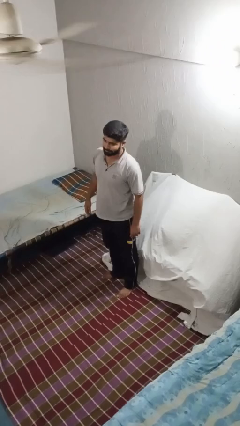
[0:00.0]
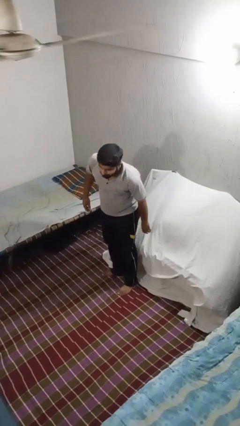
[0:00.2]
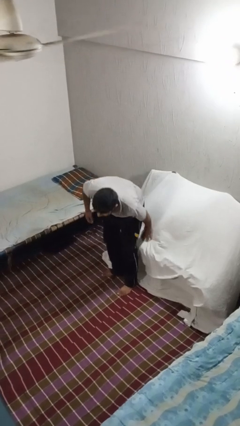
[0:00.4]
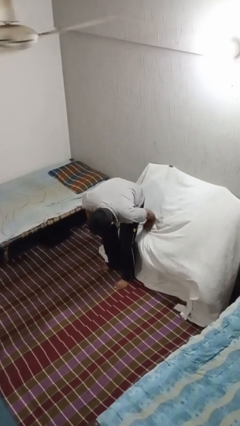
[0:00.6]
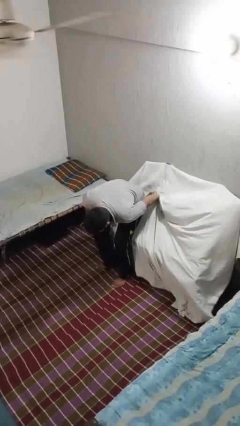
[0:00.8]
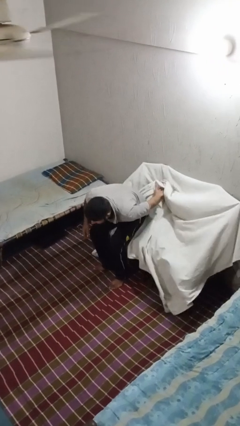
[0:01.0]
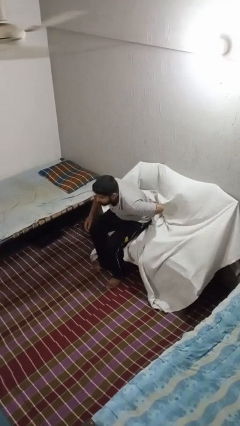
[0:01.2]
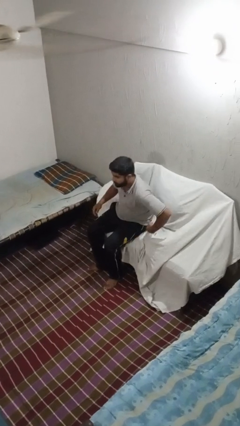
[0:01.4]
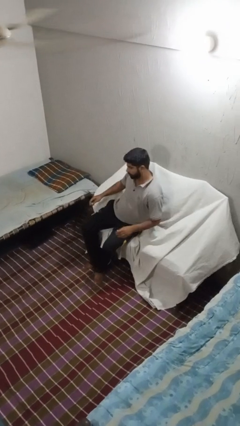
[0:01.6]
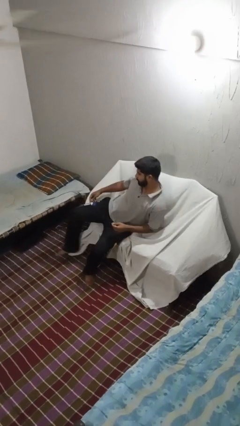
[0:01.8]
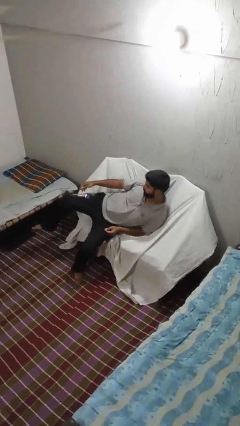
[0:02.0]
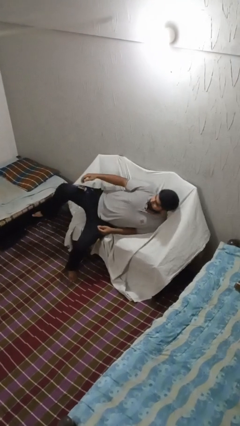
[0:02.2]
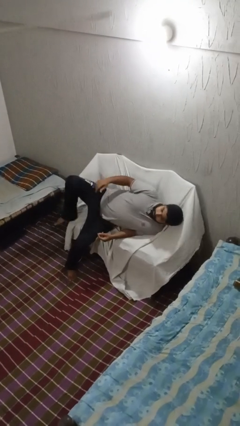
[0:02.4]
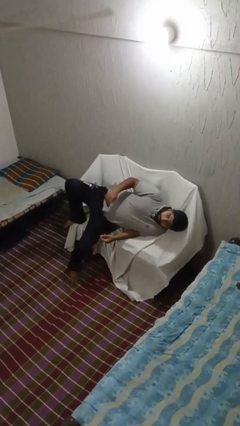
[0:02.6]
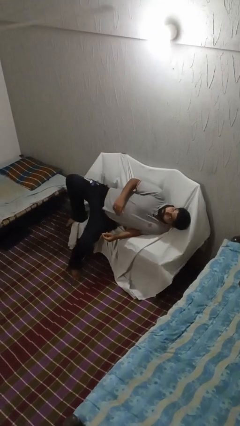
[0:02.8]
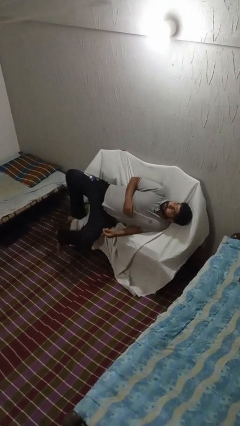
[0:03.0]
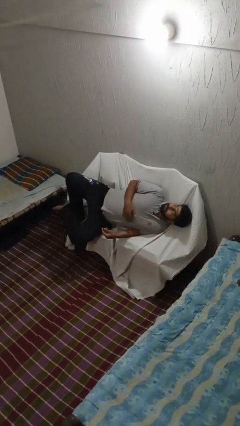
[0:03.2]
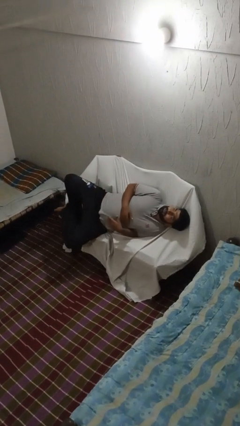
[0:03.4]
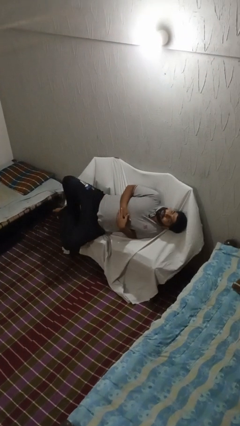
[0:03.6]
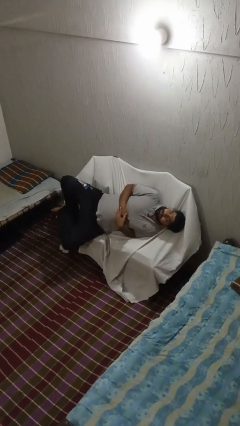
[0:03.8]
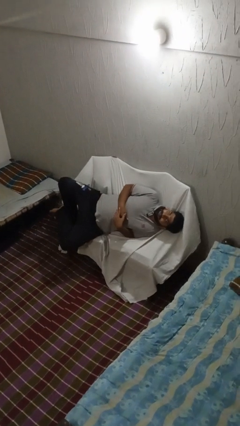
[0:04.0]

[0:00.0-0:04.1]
person lies down on couch

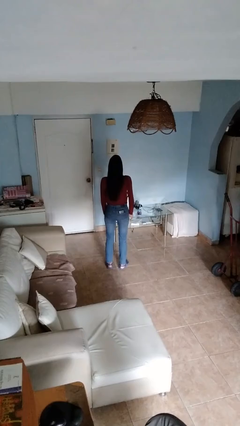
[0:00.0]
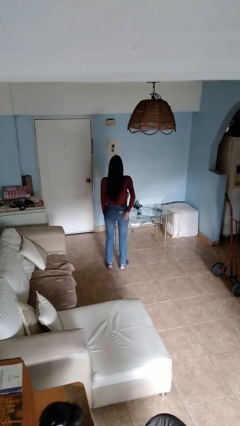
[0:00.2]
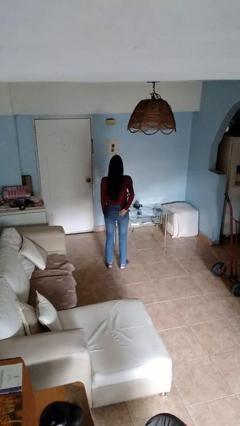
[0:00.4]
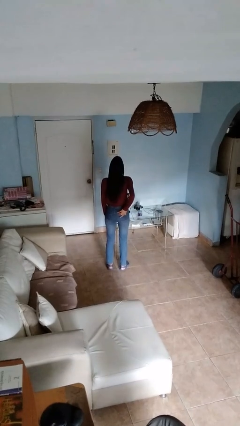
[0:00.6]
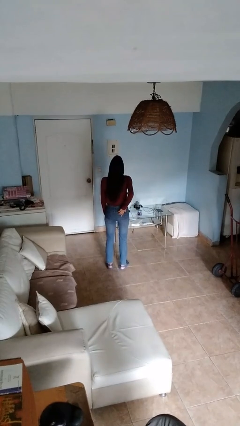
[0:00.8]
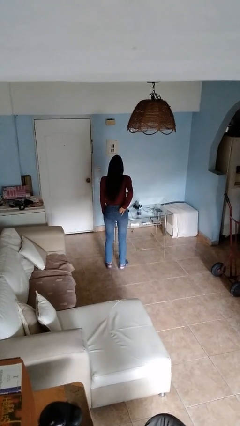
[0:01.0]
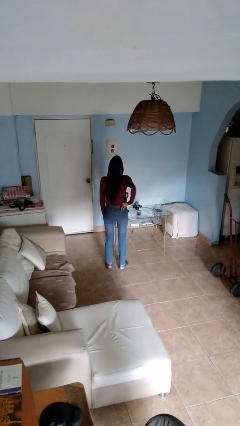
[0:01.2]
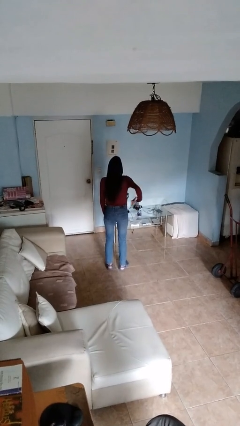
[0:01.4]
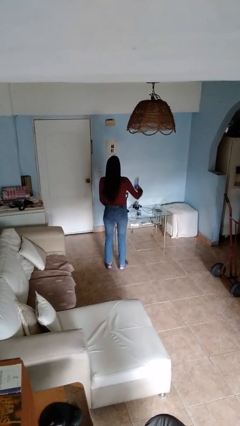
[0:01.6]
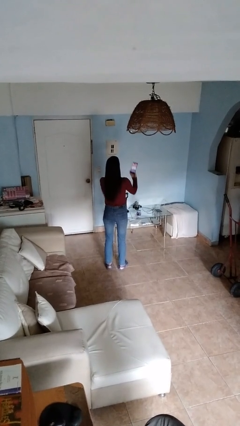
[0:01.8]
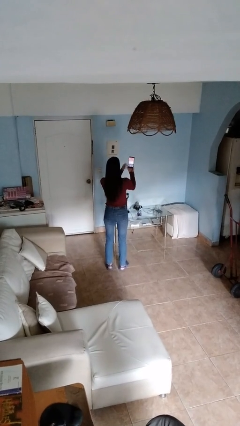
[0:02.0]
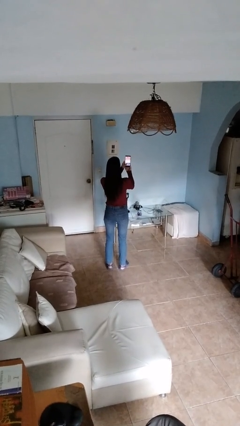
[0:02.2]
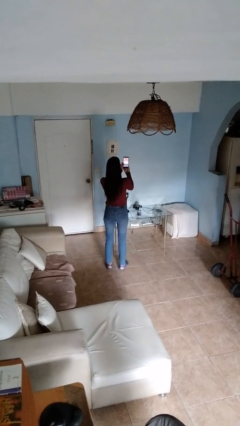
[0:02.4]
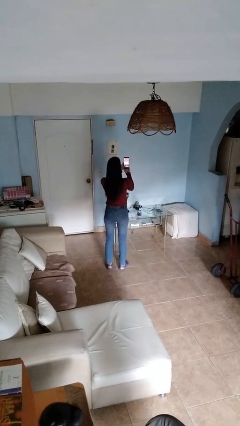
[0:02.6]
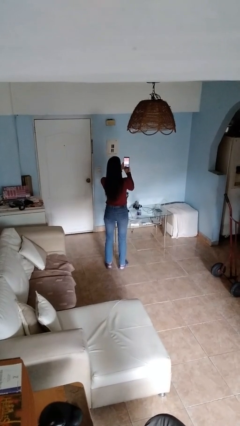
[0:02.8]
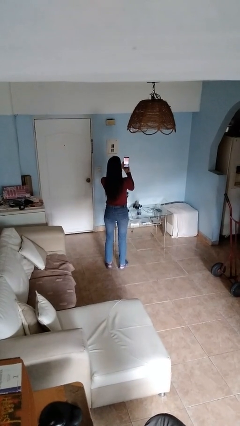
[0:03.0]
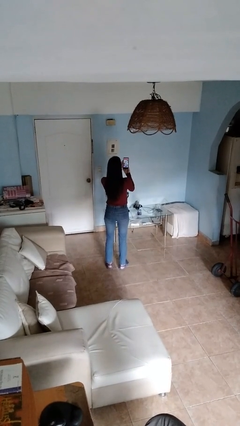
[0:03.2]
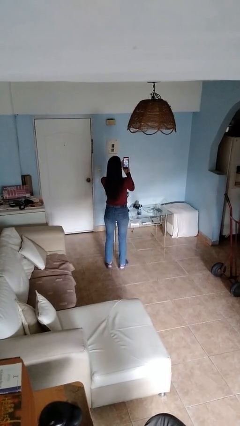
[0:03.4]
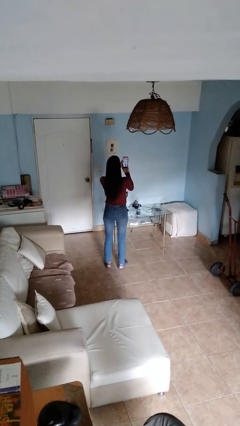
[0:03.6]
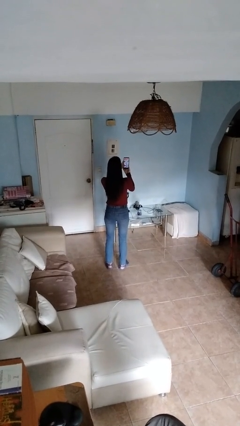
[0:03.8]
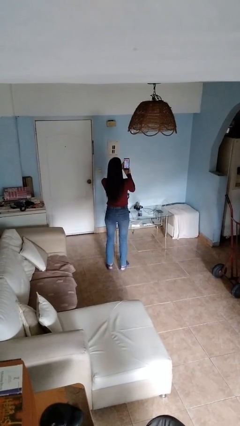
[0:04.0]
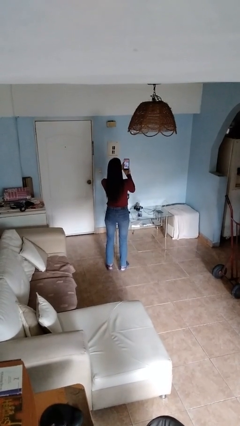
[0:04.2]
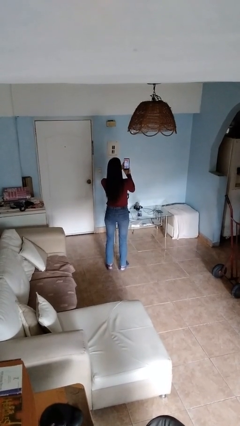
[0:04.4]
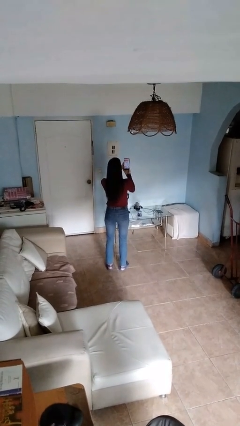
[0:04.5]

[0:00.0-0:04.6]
person takes phone from pocket

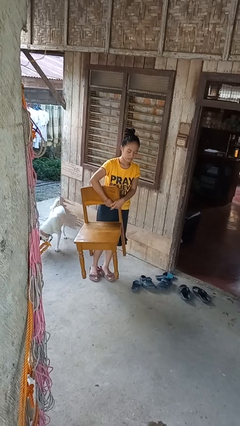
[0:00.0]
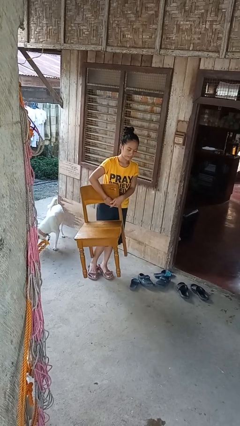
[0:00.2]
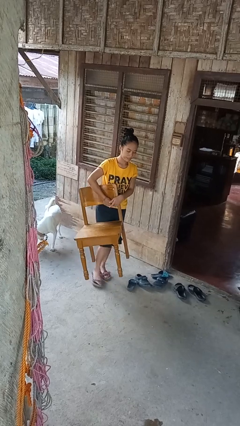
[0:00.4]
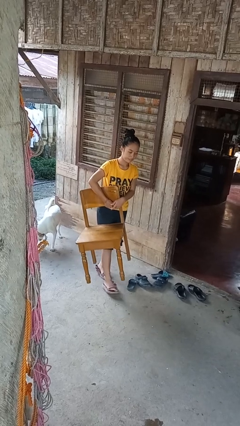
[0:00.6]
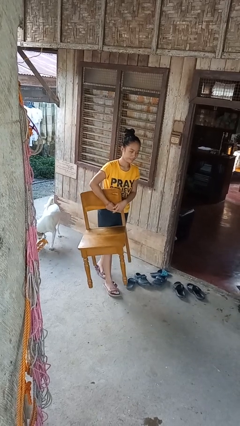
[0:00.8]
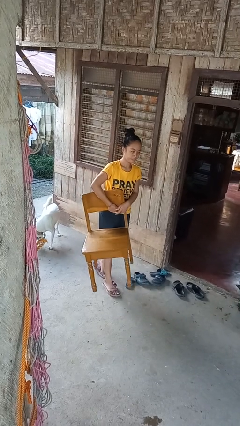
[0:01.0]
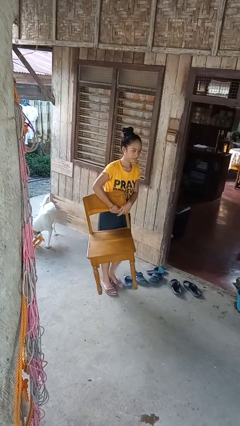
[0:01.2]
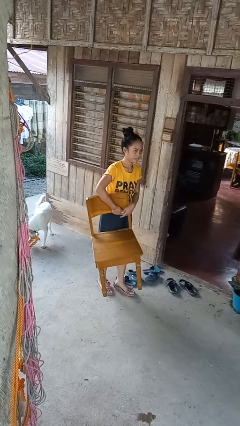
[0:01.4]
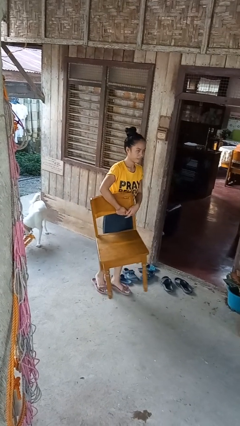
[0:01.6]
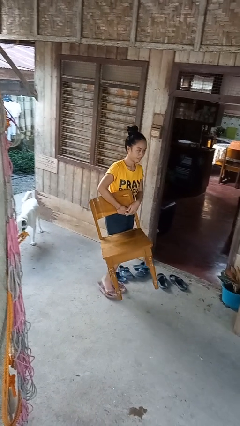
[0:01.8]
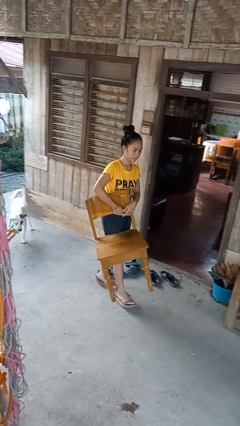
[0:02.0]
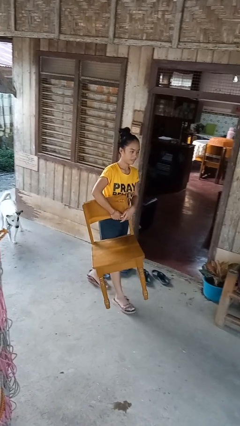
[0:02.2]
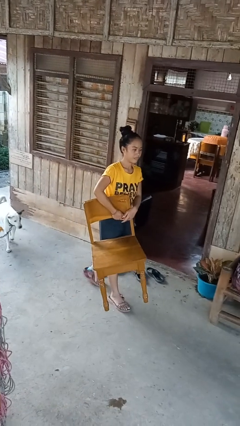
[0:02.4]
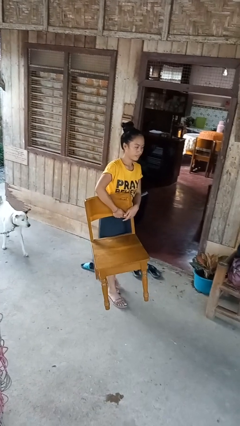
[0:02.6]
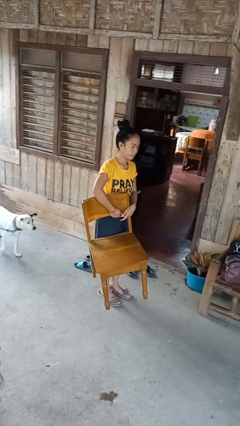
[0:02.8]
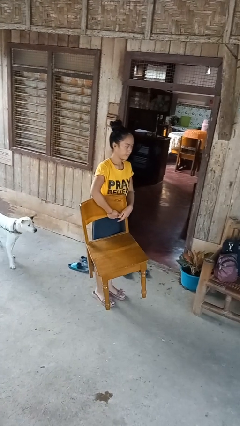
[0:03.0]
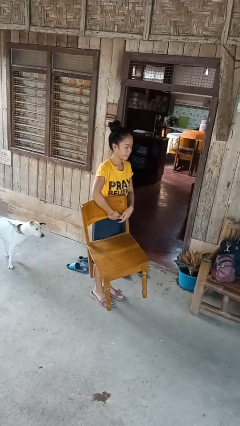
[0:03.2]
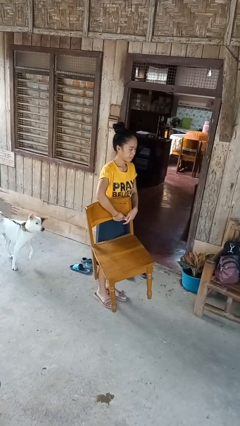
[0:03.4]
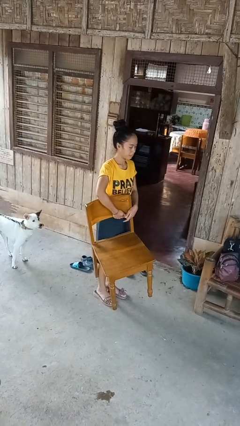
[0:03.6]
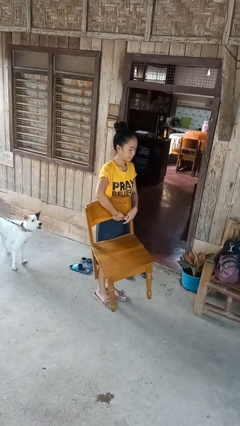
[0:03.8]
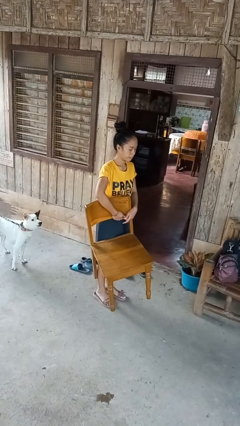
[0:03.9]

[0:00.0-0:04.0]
person carries furniture

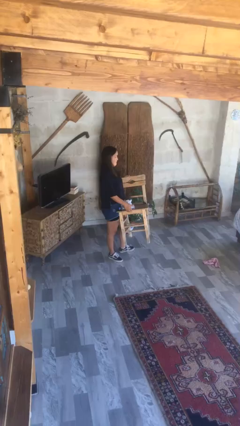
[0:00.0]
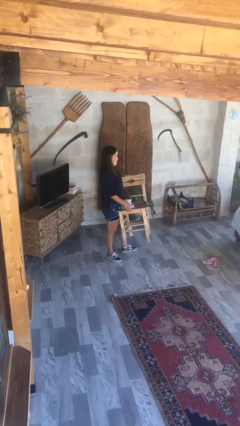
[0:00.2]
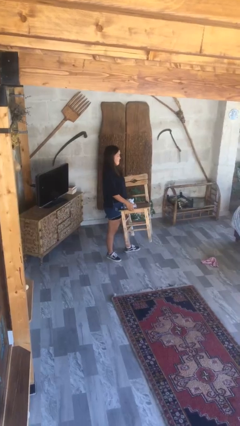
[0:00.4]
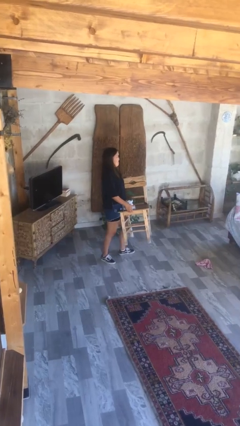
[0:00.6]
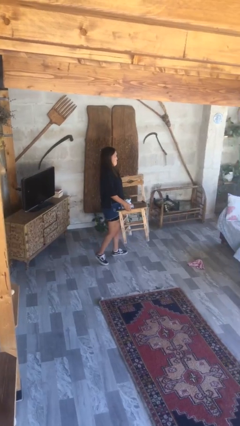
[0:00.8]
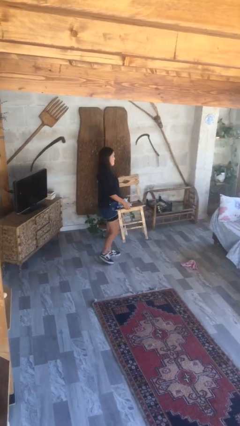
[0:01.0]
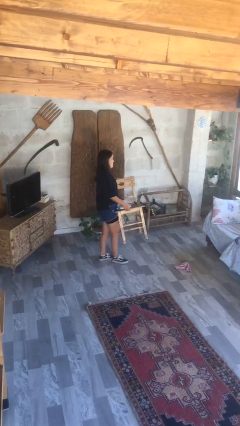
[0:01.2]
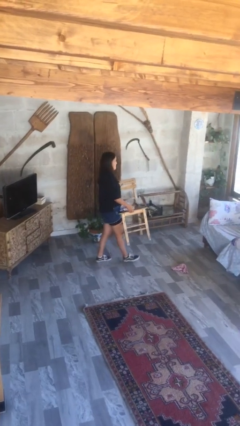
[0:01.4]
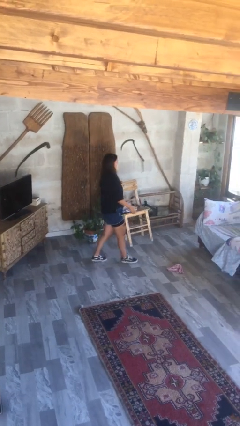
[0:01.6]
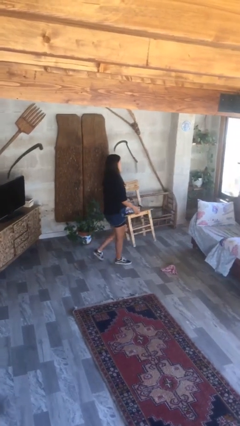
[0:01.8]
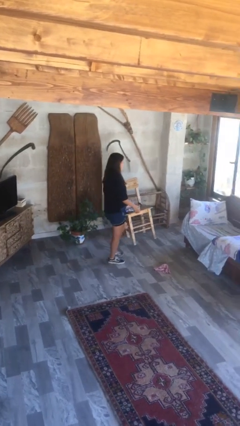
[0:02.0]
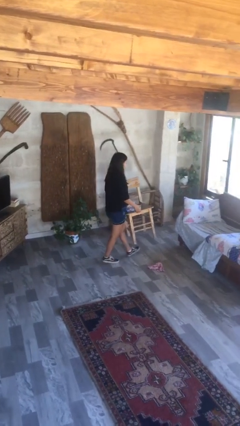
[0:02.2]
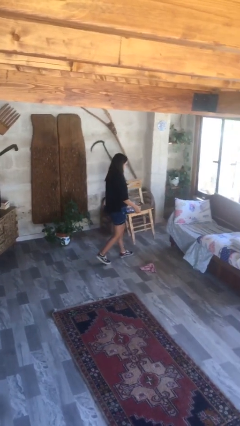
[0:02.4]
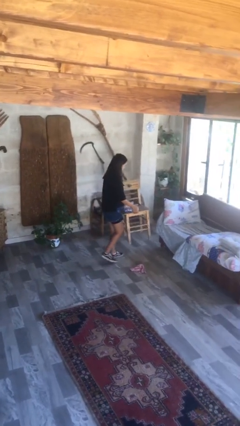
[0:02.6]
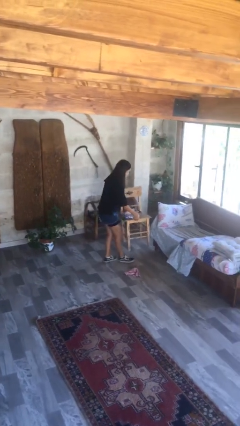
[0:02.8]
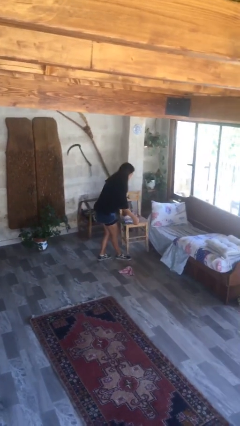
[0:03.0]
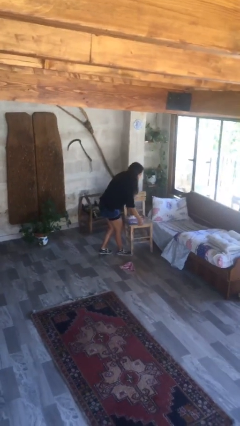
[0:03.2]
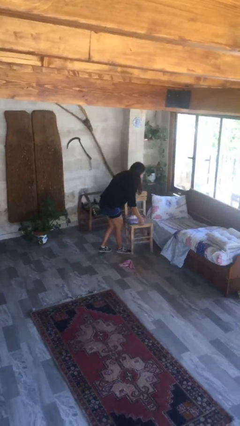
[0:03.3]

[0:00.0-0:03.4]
person carries heavy object

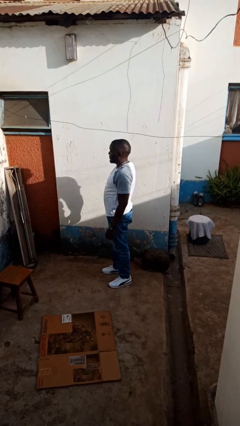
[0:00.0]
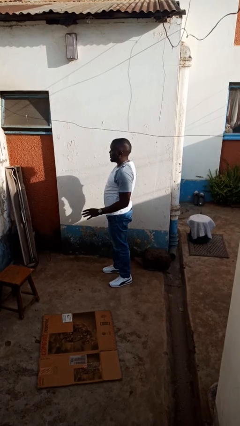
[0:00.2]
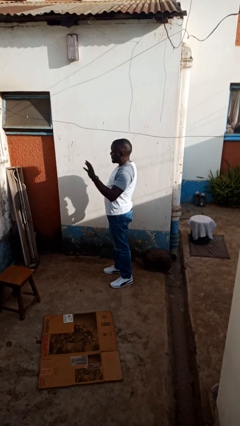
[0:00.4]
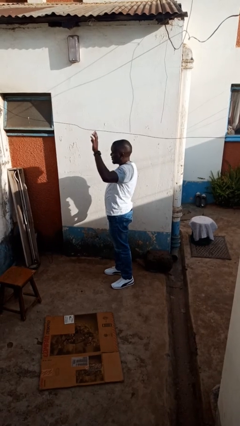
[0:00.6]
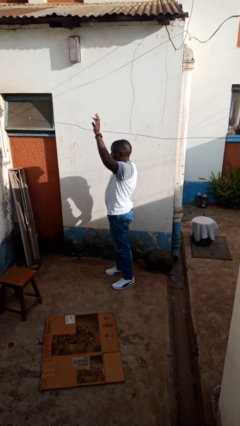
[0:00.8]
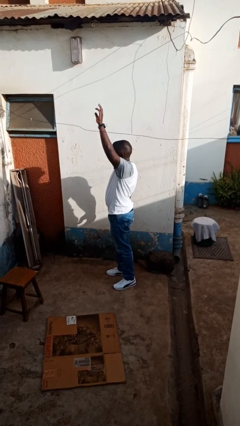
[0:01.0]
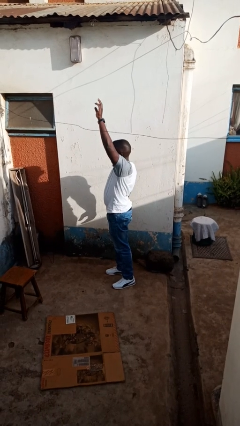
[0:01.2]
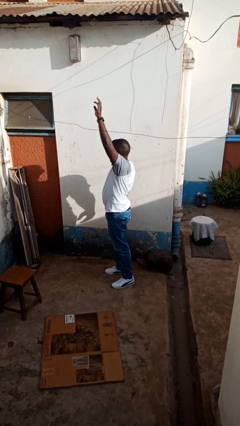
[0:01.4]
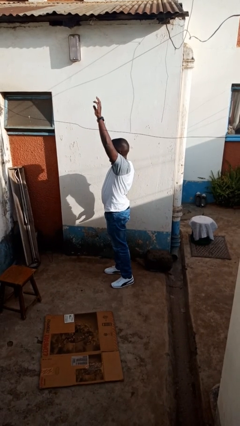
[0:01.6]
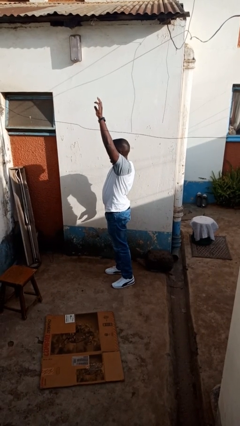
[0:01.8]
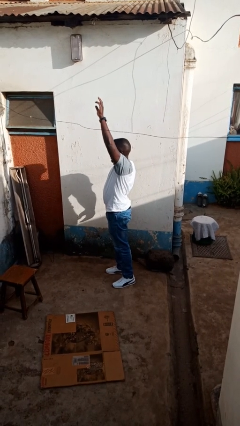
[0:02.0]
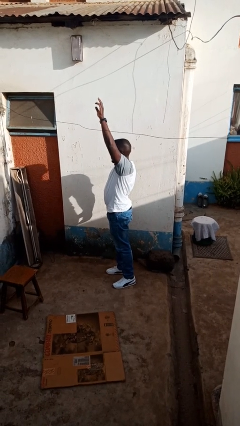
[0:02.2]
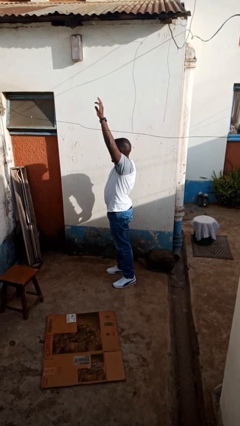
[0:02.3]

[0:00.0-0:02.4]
person gestures raise hand
